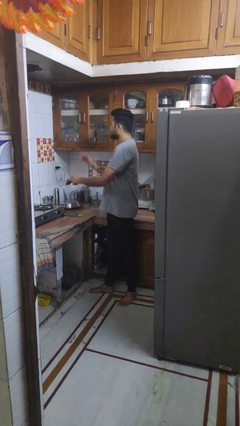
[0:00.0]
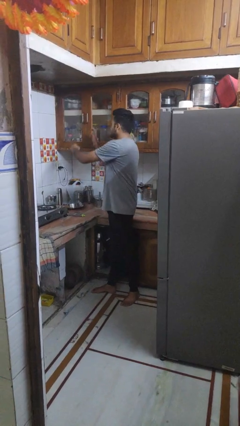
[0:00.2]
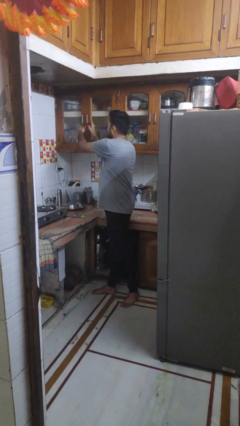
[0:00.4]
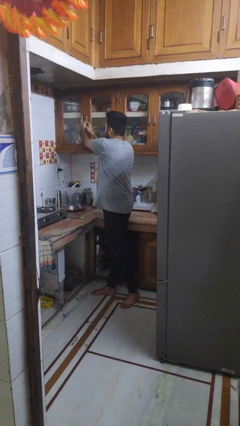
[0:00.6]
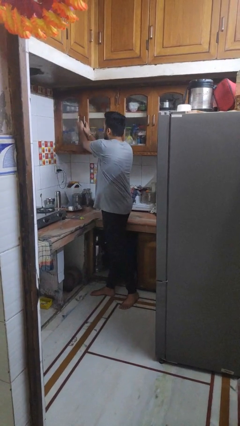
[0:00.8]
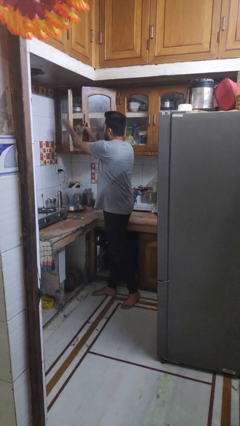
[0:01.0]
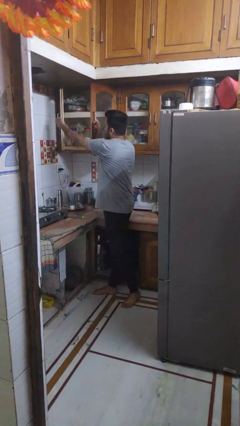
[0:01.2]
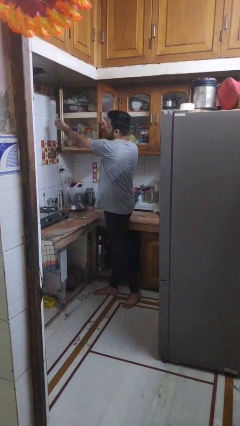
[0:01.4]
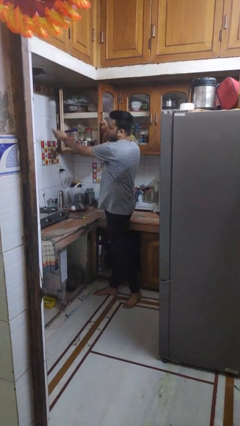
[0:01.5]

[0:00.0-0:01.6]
person opens cabinet

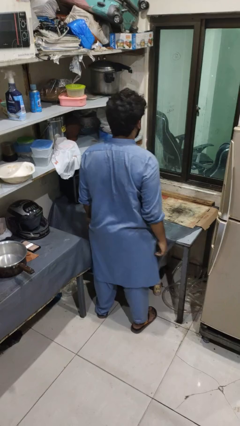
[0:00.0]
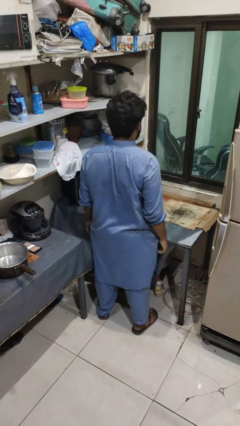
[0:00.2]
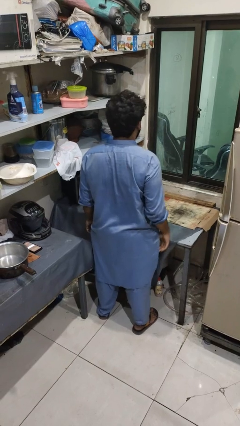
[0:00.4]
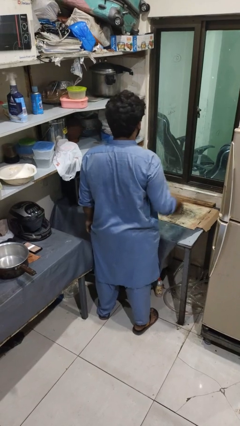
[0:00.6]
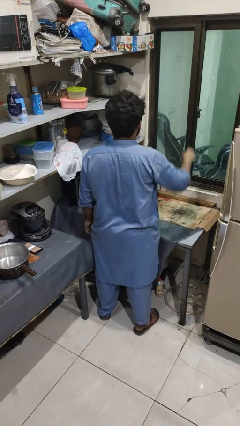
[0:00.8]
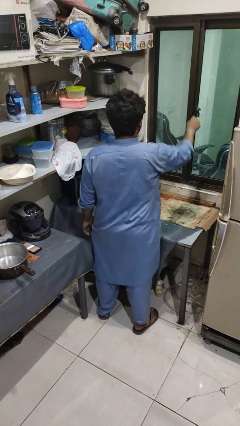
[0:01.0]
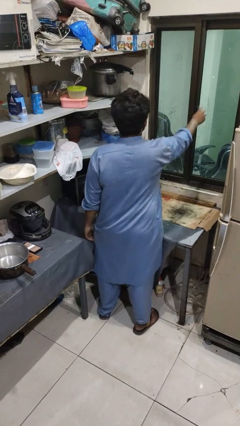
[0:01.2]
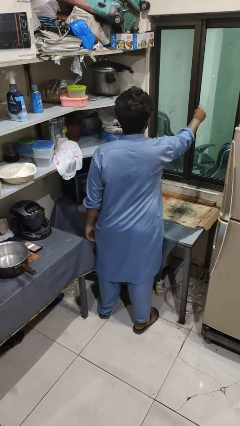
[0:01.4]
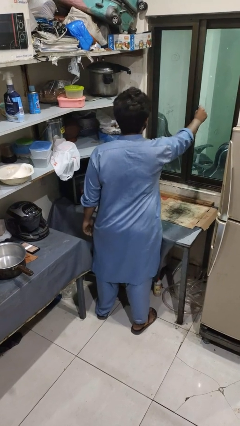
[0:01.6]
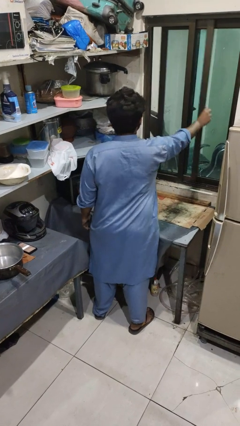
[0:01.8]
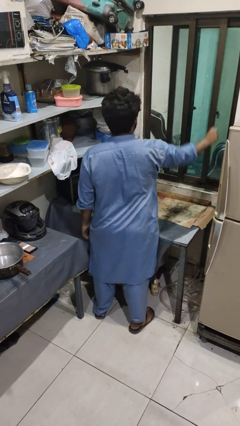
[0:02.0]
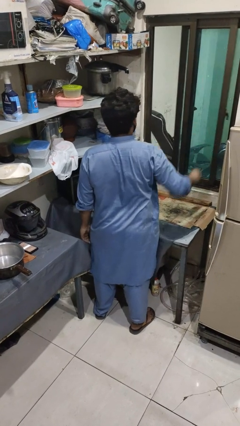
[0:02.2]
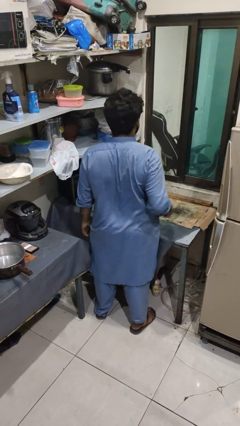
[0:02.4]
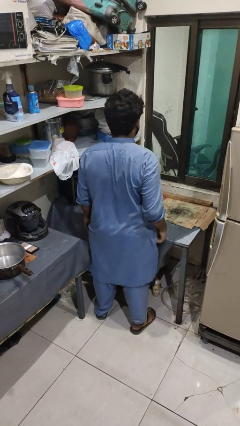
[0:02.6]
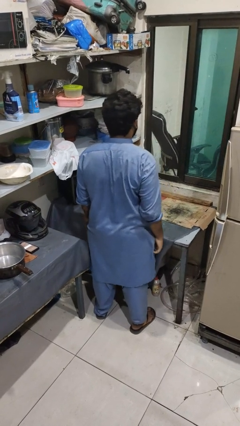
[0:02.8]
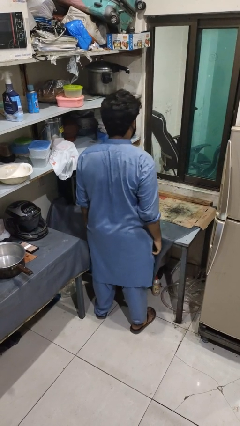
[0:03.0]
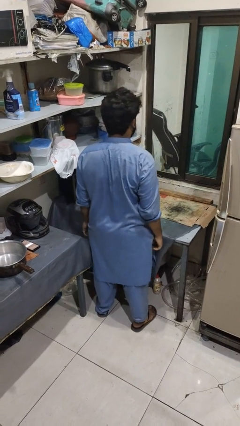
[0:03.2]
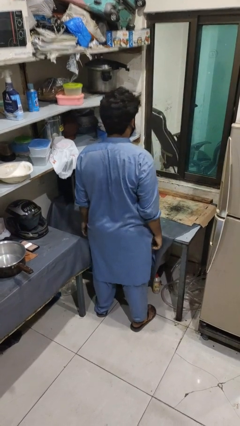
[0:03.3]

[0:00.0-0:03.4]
person opens home window

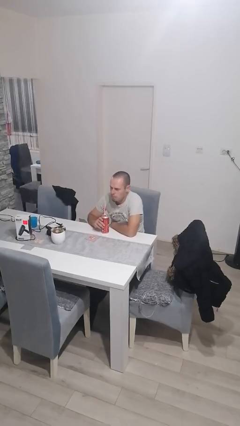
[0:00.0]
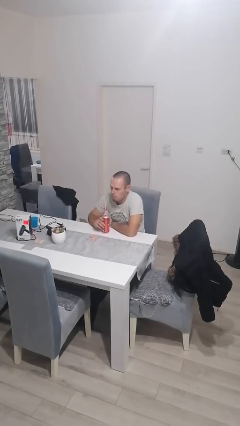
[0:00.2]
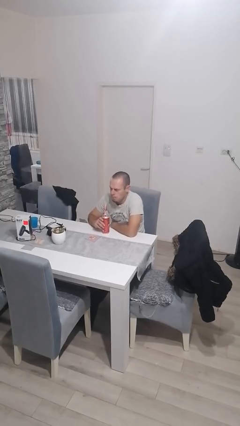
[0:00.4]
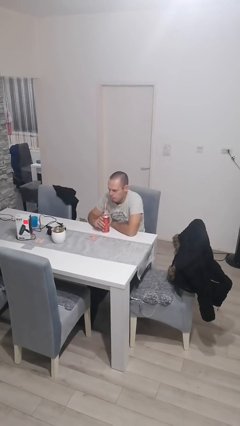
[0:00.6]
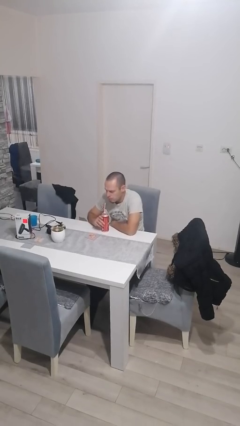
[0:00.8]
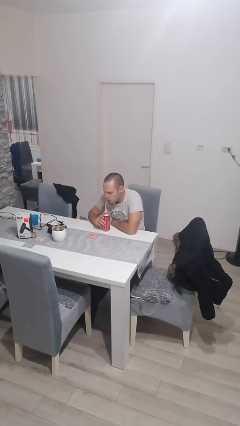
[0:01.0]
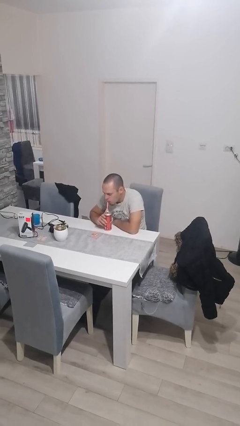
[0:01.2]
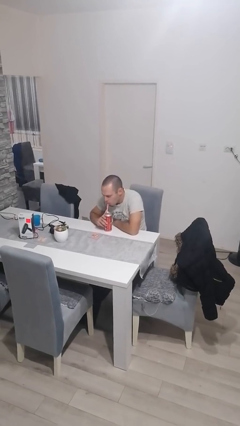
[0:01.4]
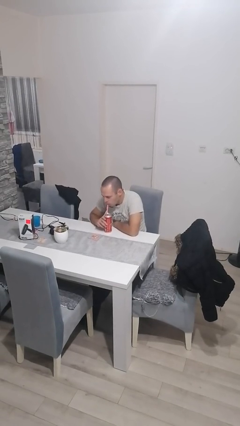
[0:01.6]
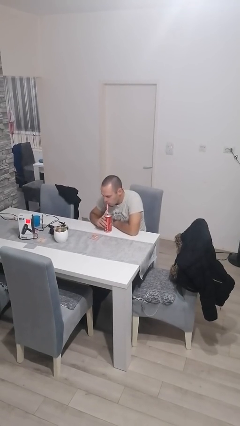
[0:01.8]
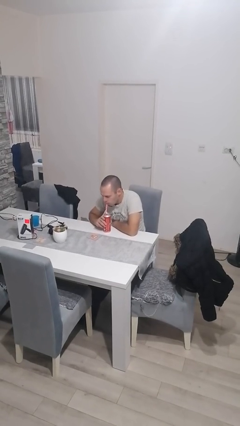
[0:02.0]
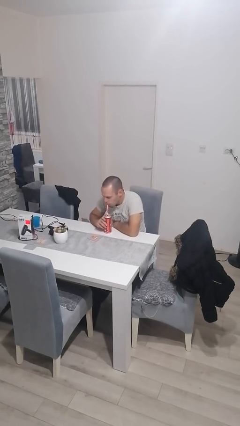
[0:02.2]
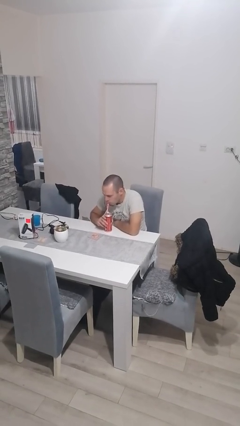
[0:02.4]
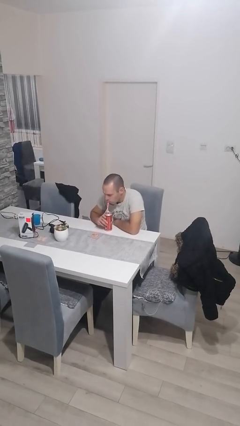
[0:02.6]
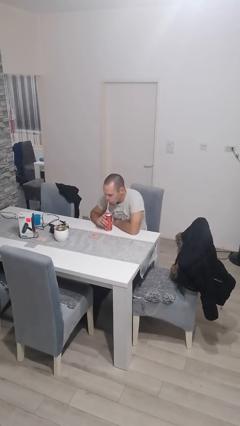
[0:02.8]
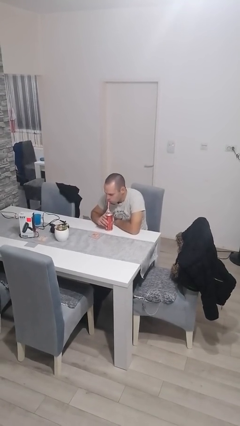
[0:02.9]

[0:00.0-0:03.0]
person drinks from straw

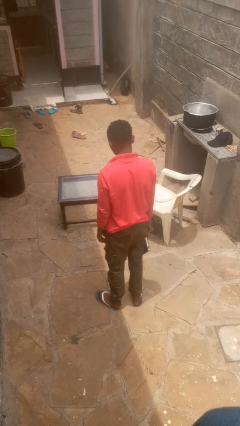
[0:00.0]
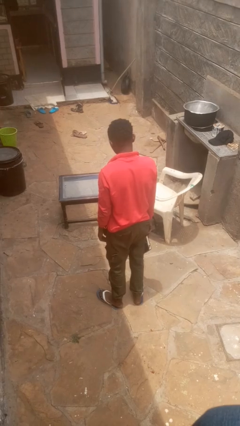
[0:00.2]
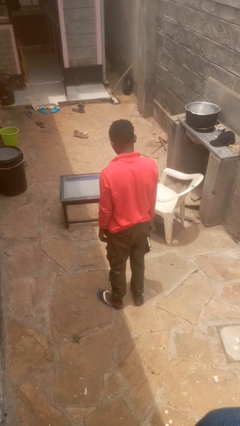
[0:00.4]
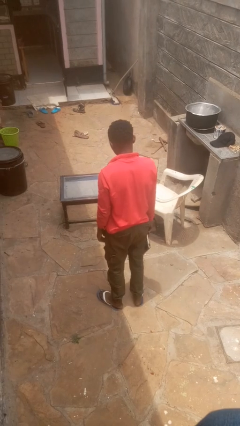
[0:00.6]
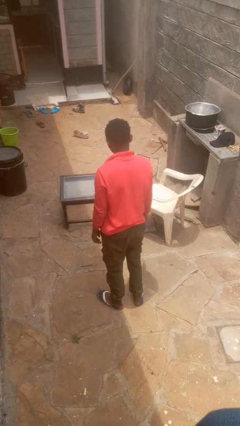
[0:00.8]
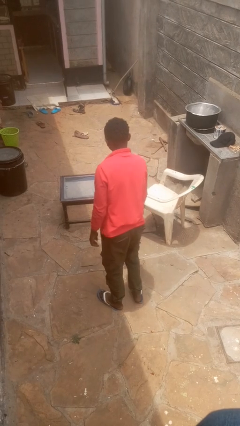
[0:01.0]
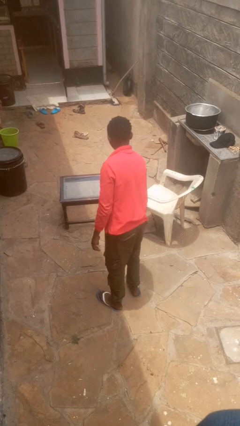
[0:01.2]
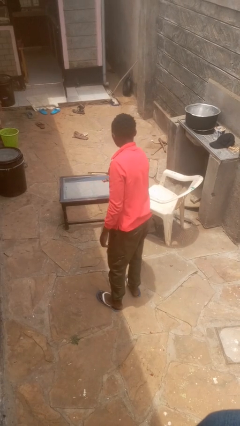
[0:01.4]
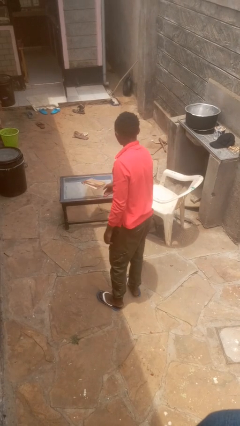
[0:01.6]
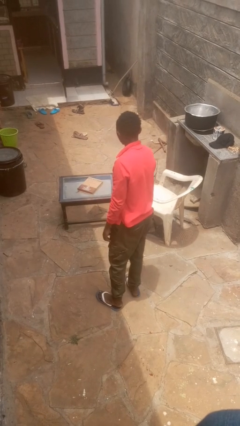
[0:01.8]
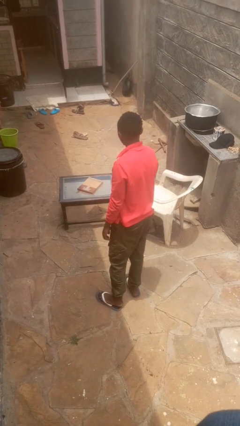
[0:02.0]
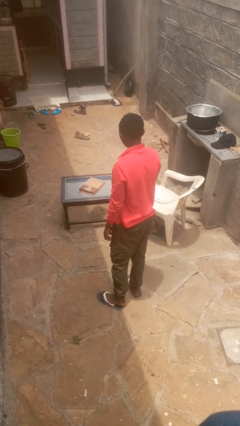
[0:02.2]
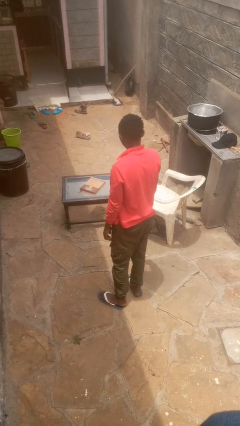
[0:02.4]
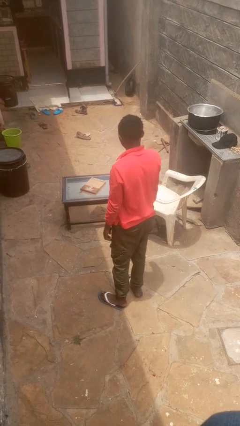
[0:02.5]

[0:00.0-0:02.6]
person throws object on table

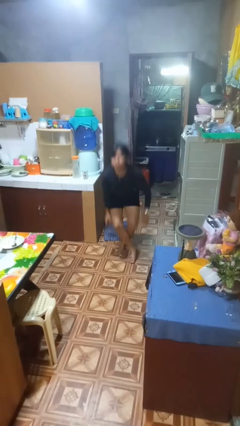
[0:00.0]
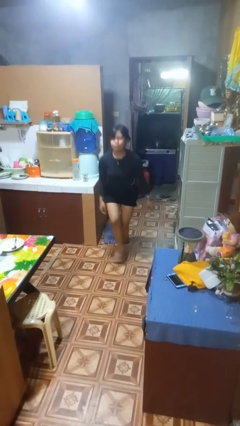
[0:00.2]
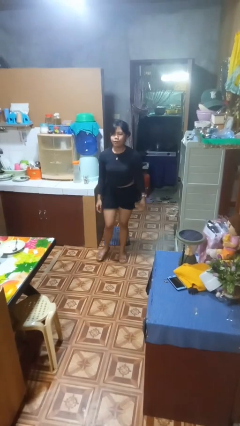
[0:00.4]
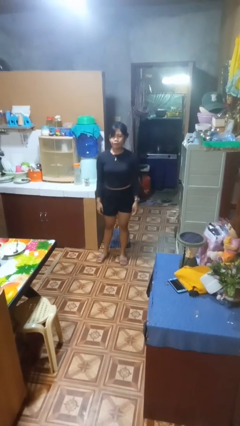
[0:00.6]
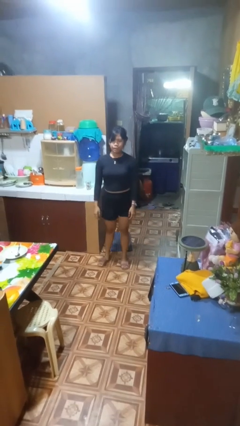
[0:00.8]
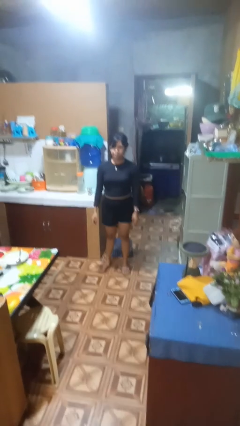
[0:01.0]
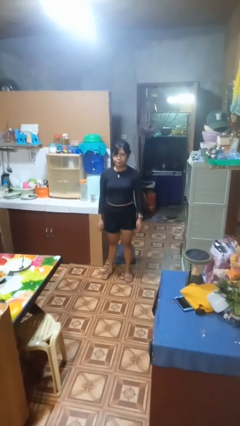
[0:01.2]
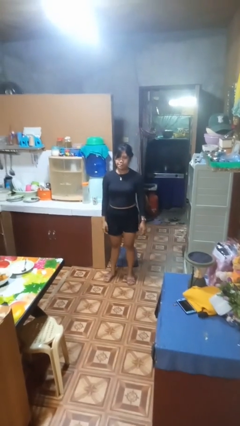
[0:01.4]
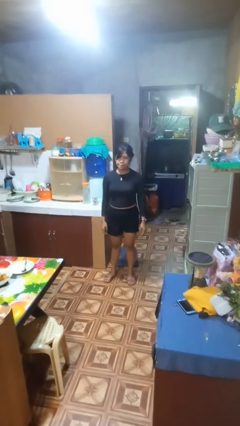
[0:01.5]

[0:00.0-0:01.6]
person stands up from floor

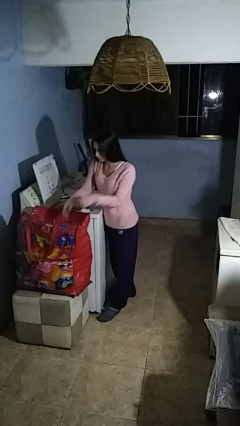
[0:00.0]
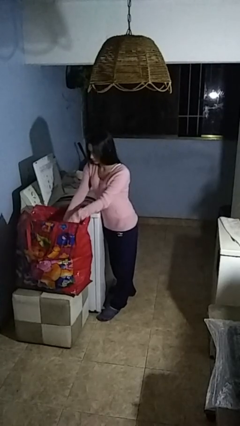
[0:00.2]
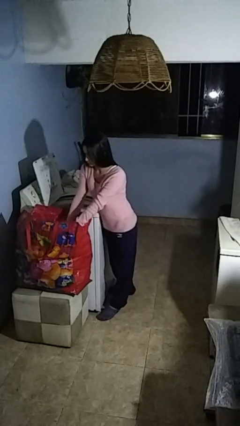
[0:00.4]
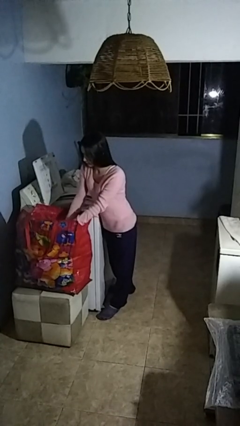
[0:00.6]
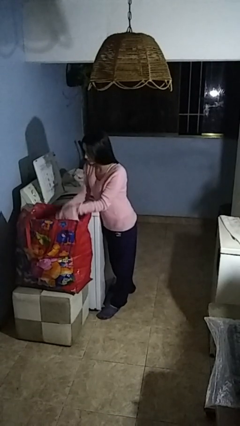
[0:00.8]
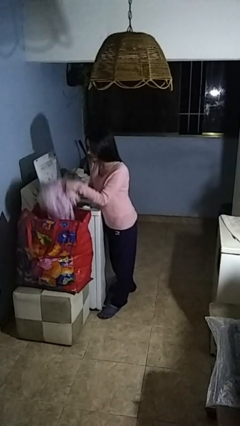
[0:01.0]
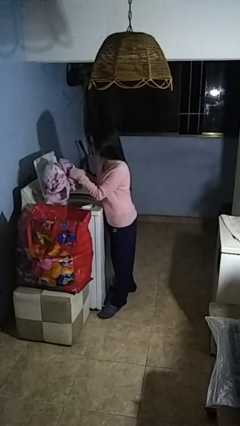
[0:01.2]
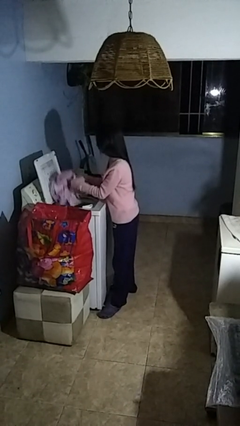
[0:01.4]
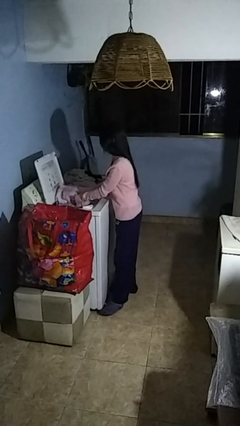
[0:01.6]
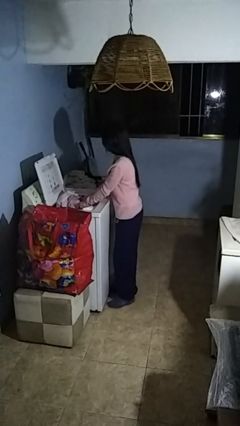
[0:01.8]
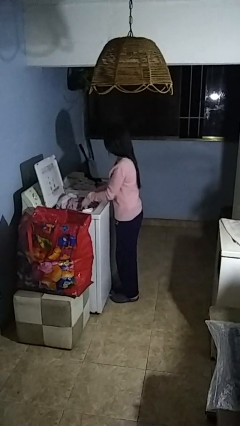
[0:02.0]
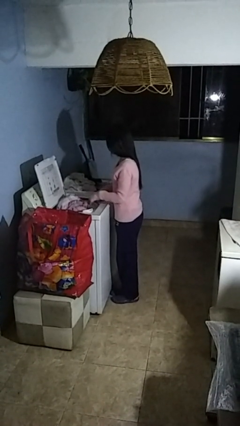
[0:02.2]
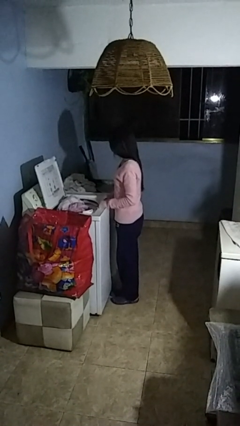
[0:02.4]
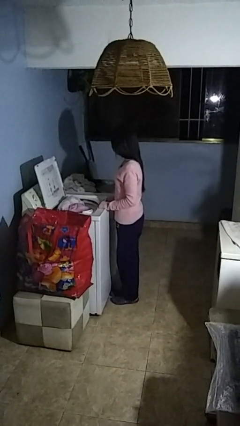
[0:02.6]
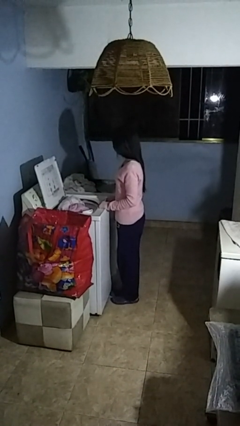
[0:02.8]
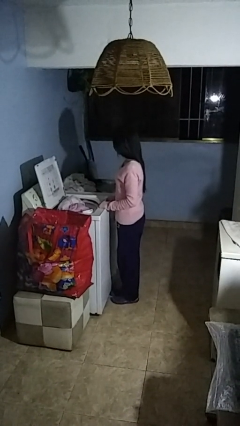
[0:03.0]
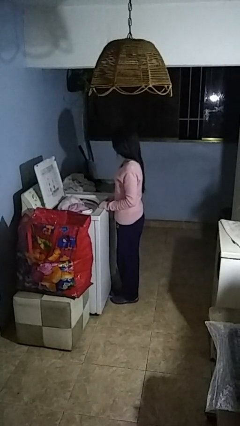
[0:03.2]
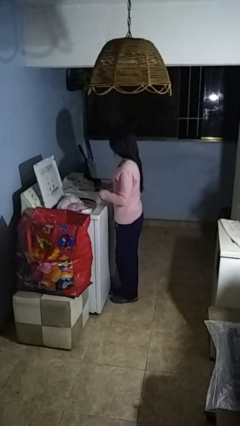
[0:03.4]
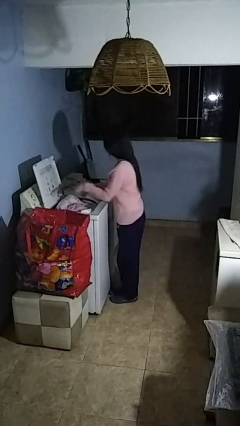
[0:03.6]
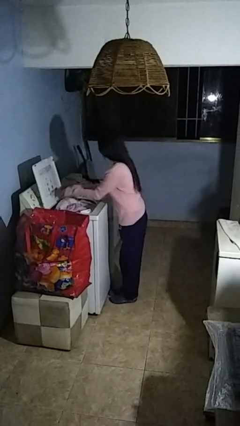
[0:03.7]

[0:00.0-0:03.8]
person loads clotheswasher

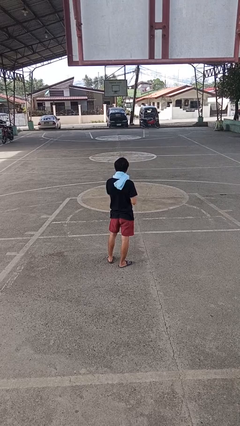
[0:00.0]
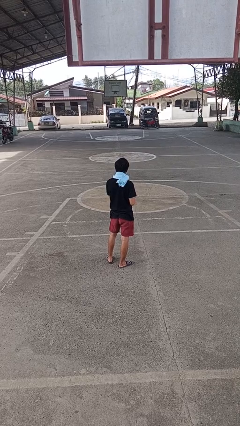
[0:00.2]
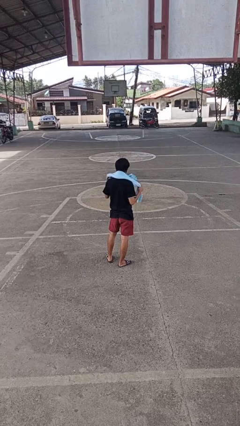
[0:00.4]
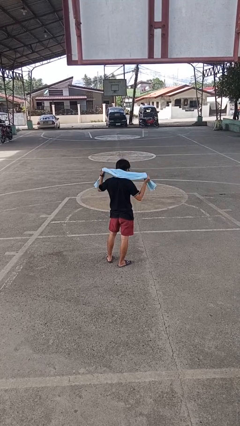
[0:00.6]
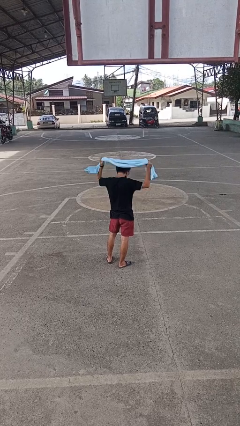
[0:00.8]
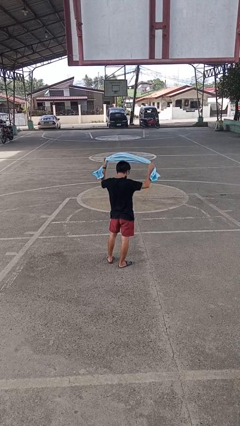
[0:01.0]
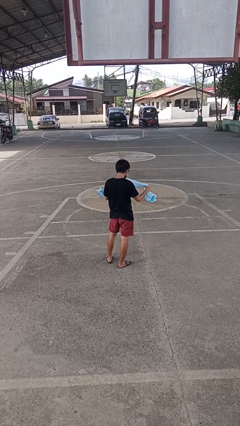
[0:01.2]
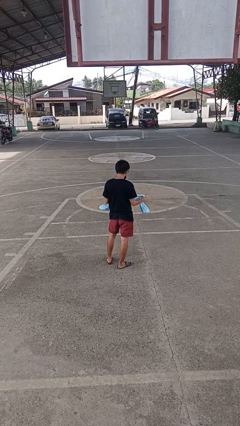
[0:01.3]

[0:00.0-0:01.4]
person takes off scarf
